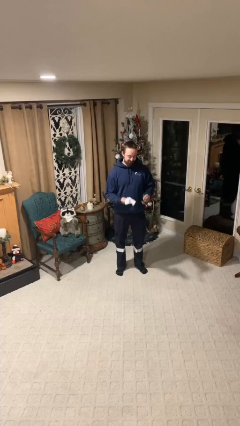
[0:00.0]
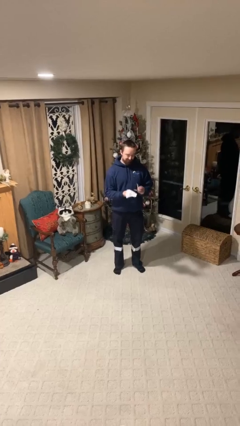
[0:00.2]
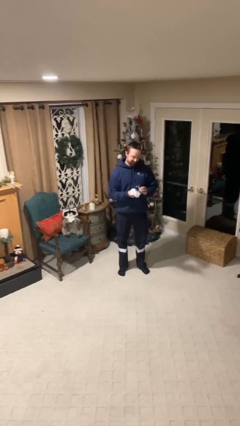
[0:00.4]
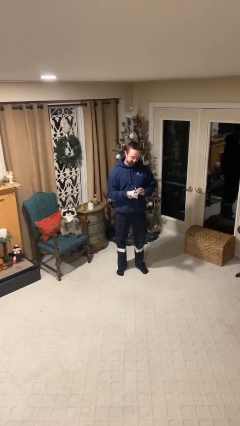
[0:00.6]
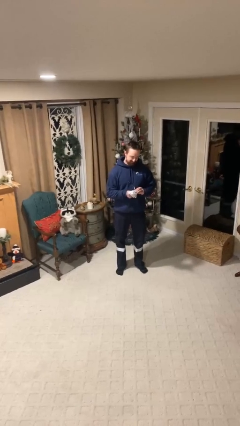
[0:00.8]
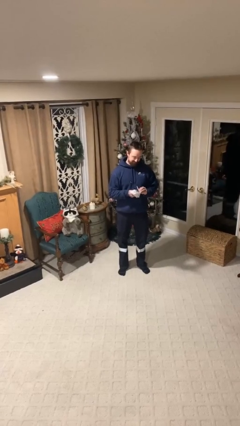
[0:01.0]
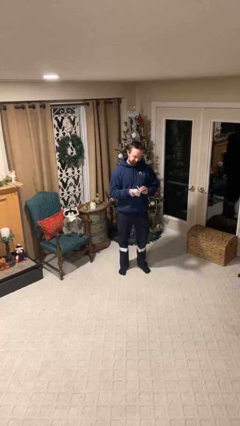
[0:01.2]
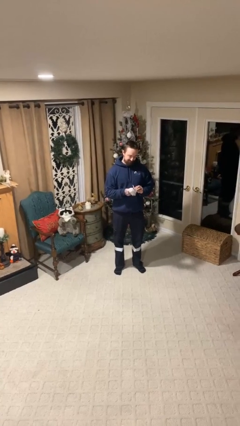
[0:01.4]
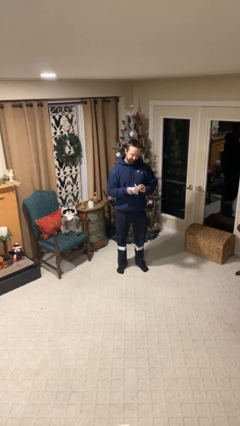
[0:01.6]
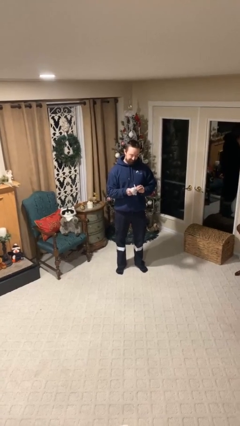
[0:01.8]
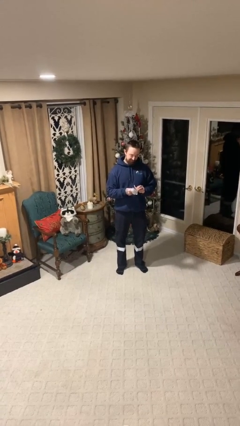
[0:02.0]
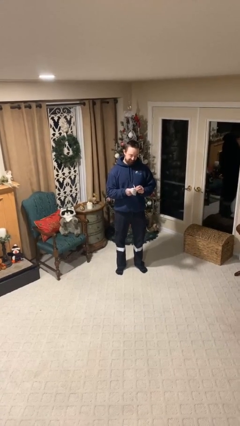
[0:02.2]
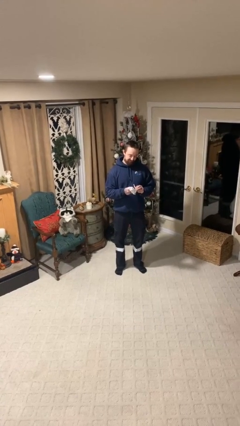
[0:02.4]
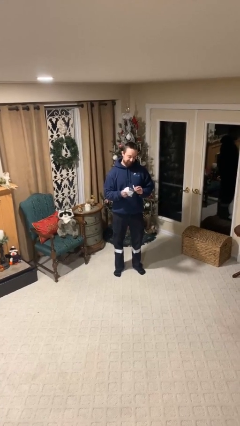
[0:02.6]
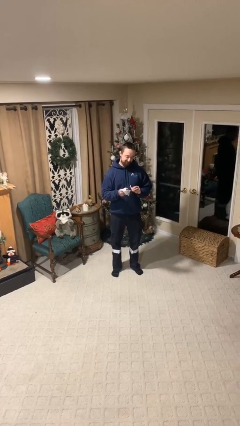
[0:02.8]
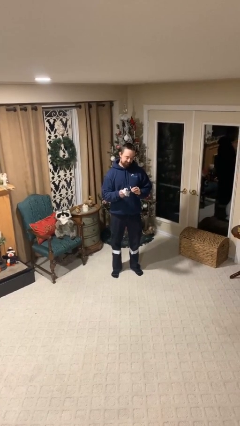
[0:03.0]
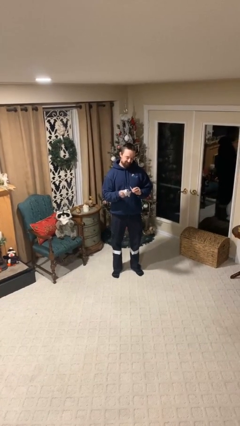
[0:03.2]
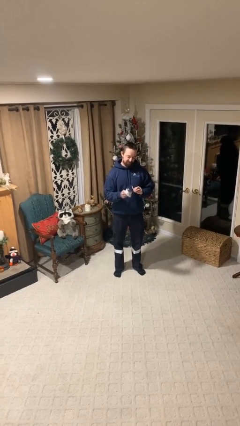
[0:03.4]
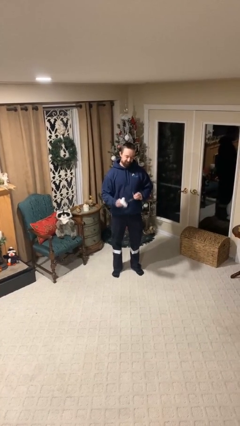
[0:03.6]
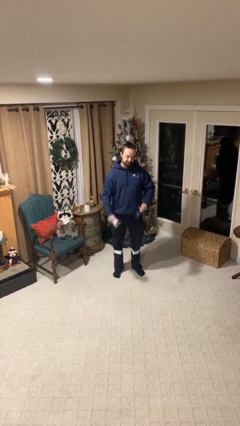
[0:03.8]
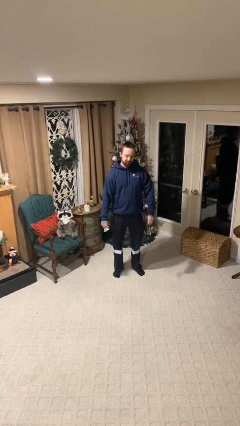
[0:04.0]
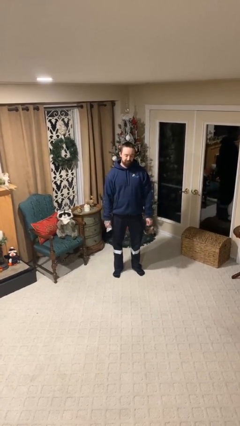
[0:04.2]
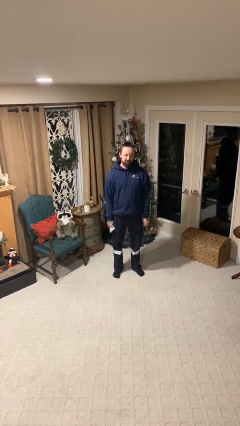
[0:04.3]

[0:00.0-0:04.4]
person cleans eyeglasses

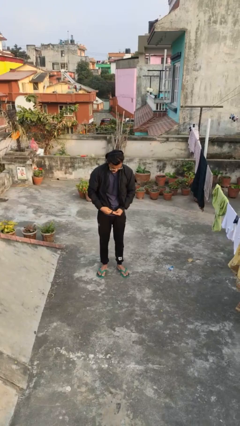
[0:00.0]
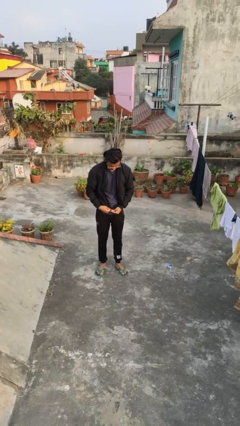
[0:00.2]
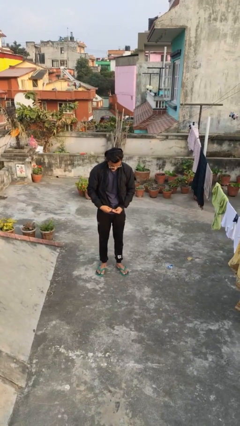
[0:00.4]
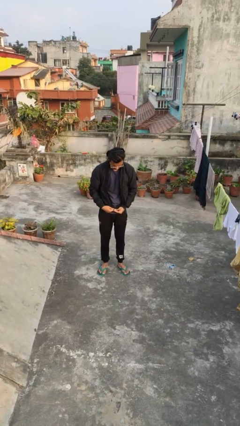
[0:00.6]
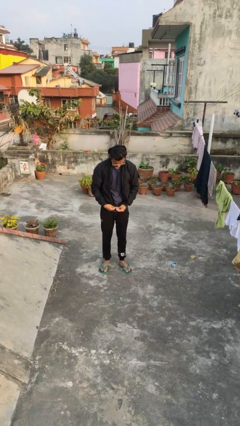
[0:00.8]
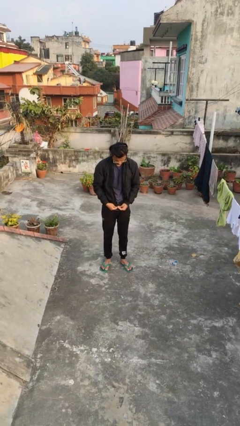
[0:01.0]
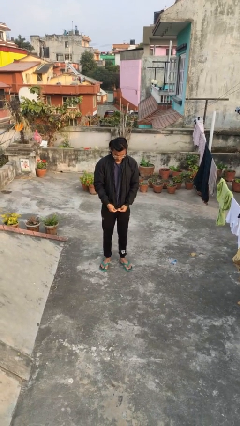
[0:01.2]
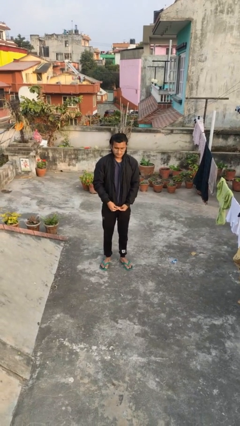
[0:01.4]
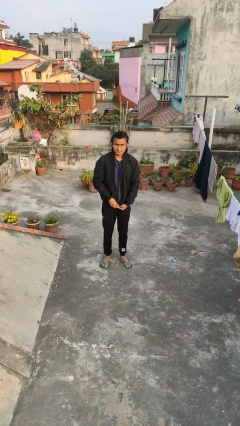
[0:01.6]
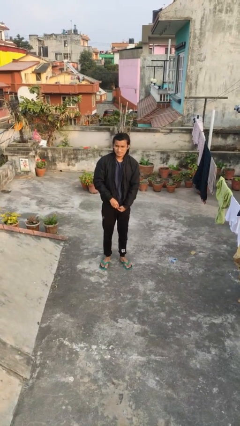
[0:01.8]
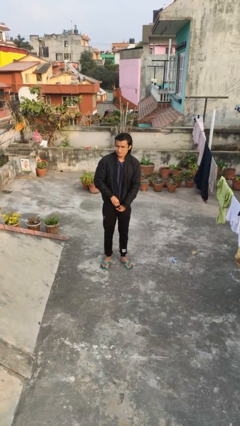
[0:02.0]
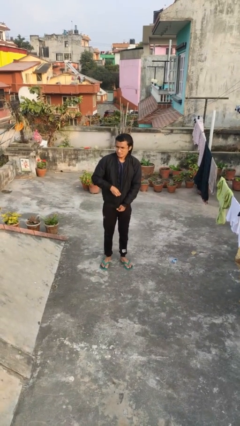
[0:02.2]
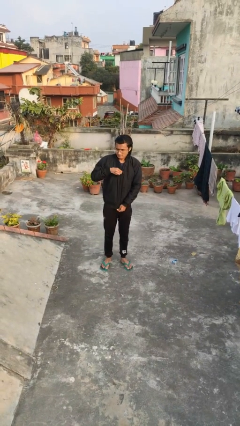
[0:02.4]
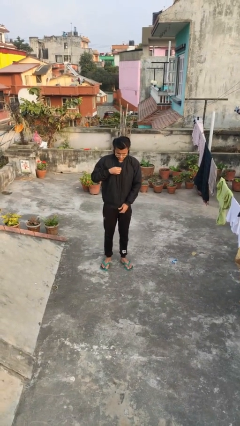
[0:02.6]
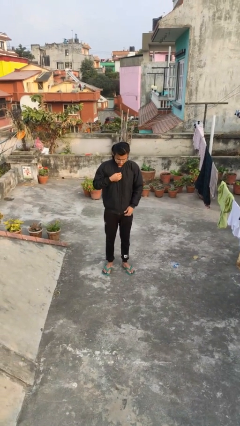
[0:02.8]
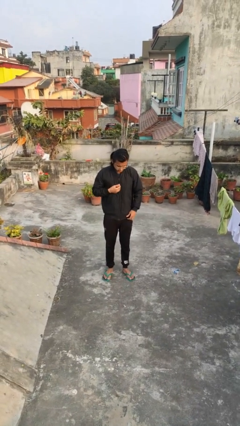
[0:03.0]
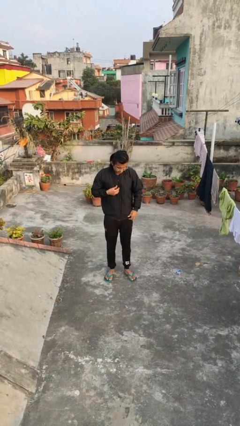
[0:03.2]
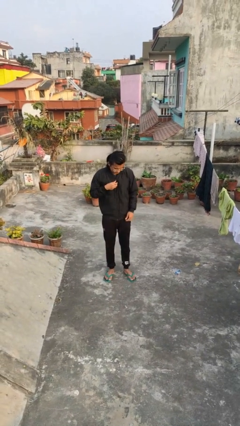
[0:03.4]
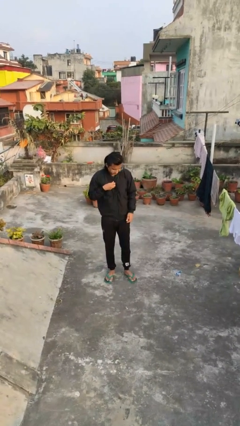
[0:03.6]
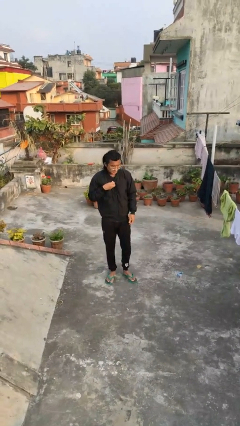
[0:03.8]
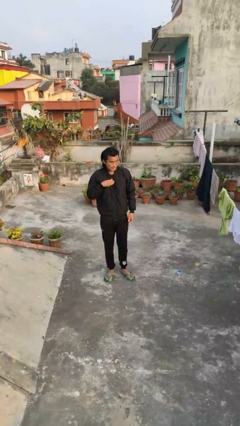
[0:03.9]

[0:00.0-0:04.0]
person zips up jacket

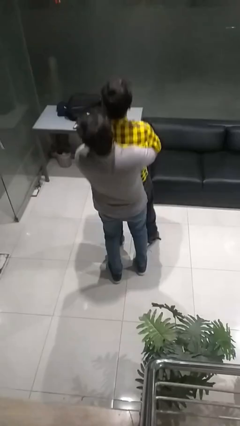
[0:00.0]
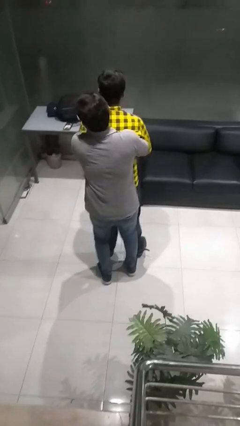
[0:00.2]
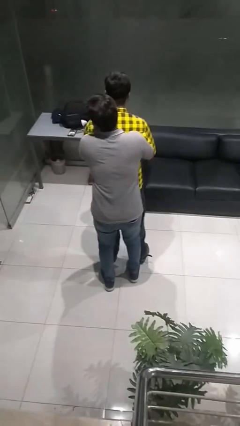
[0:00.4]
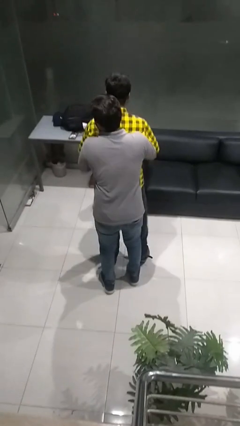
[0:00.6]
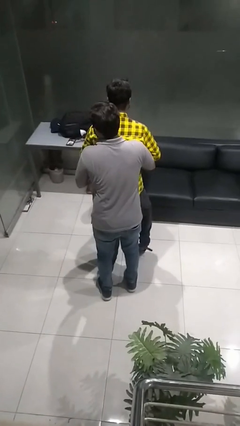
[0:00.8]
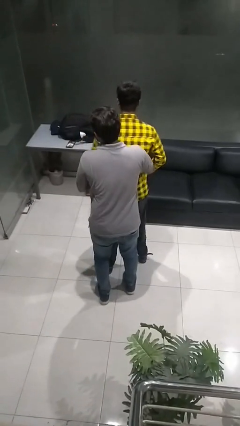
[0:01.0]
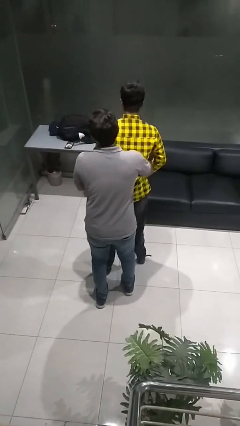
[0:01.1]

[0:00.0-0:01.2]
person puts down person

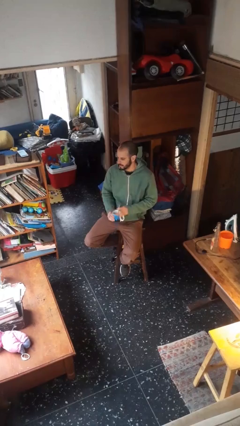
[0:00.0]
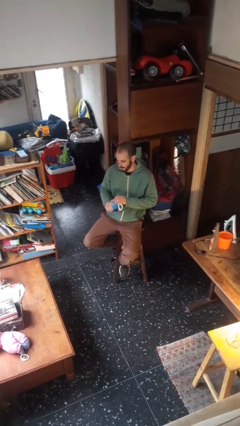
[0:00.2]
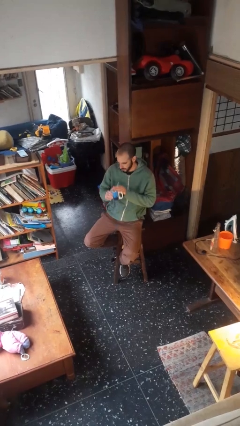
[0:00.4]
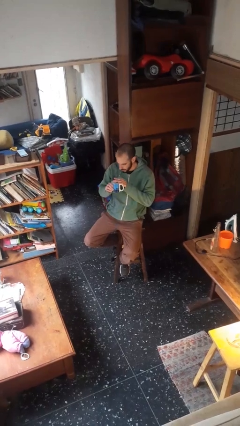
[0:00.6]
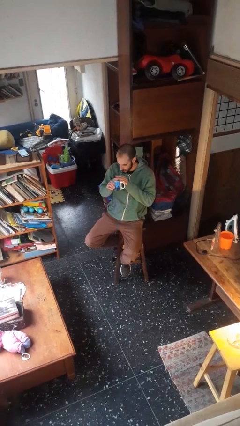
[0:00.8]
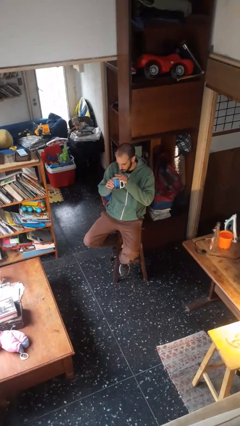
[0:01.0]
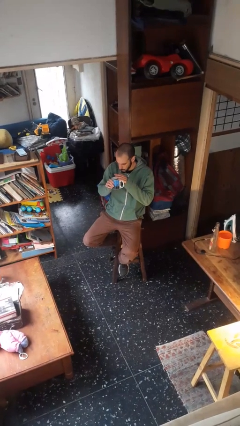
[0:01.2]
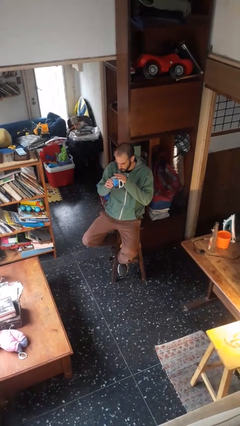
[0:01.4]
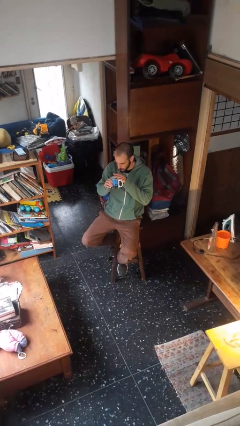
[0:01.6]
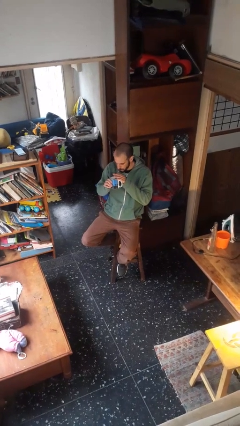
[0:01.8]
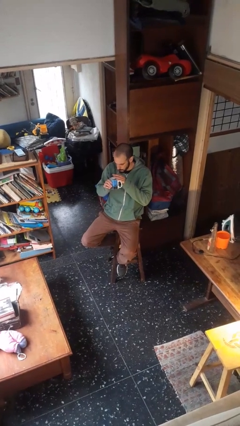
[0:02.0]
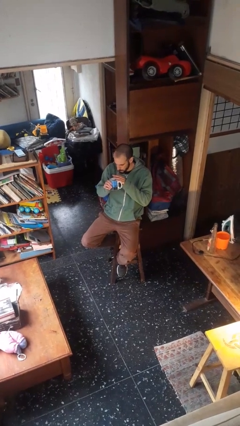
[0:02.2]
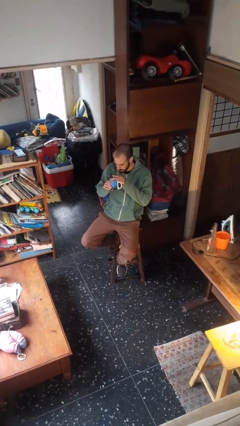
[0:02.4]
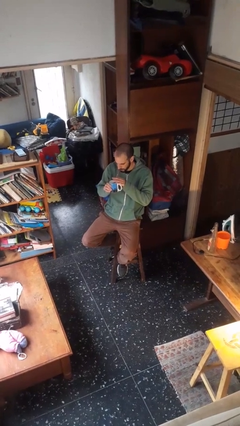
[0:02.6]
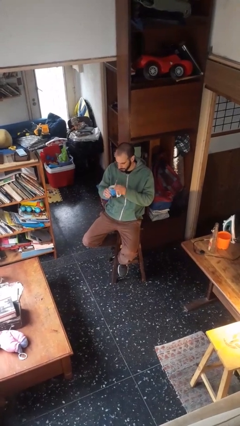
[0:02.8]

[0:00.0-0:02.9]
person drinks from straw

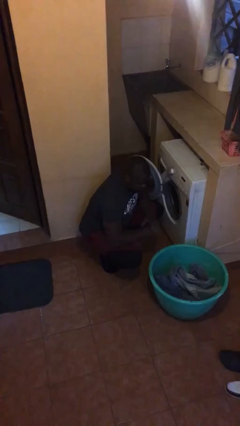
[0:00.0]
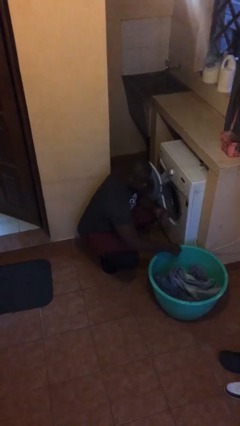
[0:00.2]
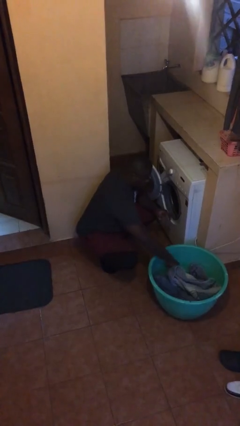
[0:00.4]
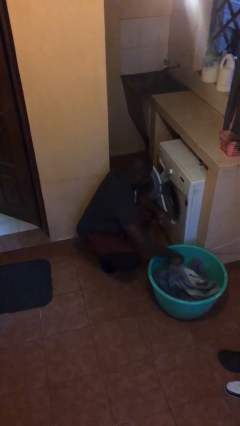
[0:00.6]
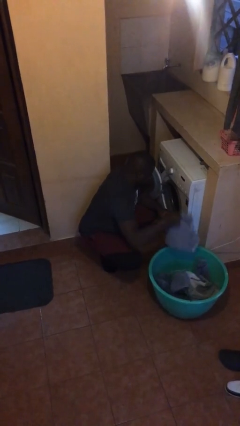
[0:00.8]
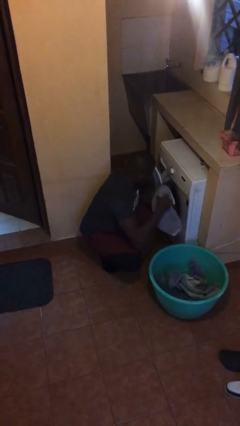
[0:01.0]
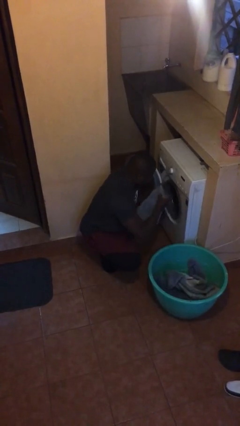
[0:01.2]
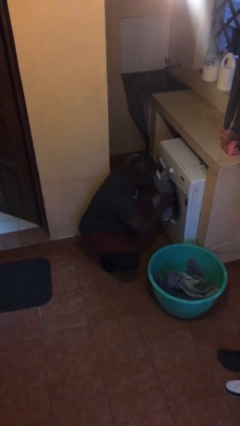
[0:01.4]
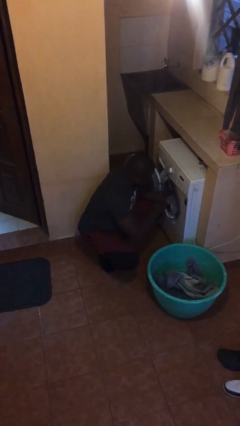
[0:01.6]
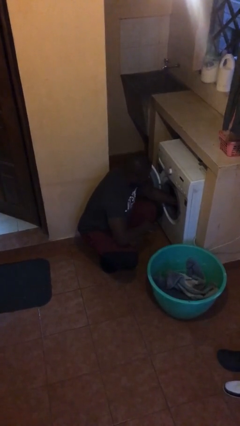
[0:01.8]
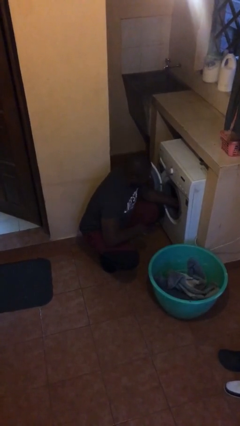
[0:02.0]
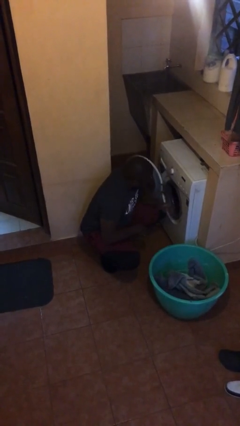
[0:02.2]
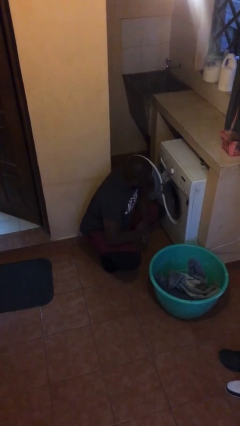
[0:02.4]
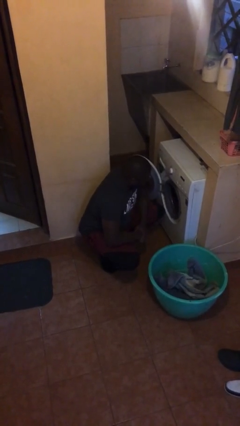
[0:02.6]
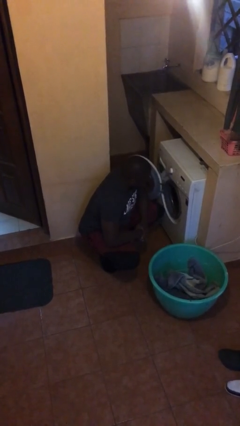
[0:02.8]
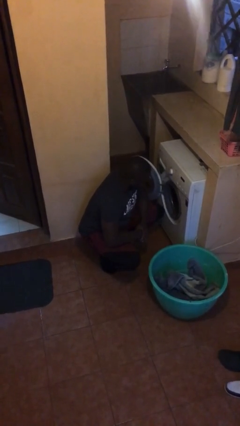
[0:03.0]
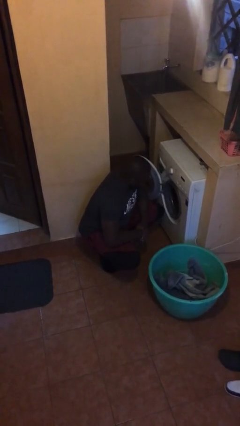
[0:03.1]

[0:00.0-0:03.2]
person loads dryer

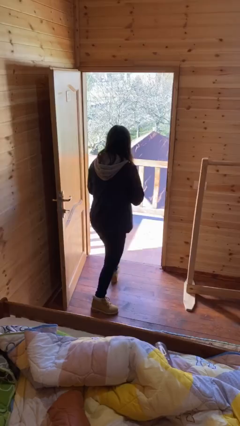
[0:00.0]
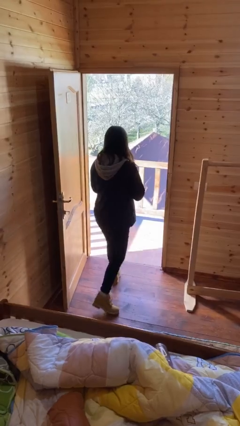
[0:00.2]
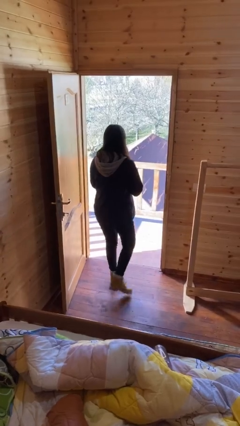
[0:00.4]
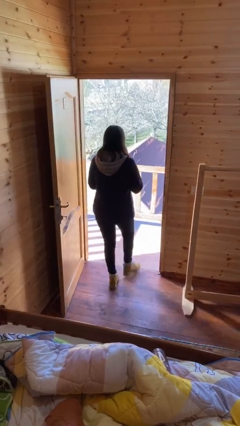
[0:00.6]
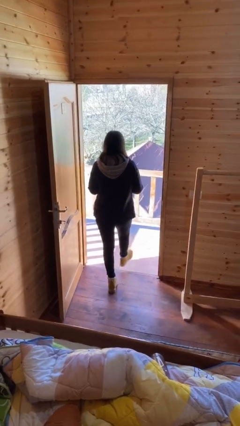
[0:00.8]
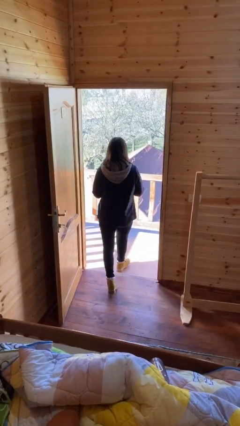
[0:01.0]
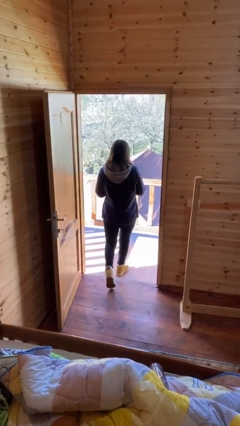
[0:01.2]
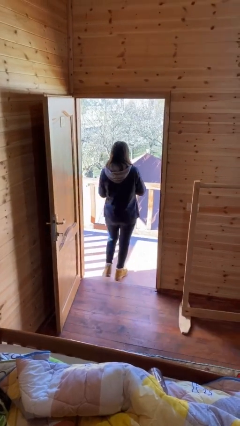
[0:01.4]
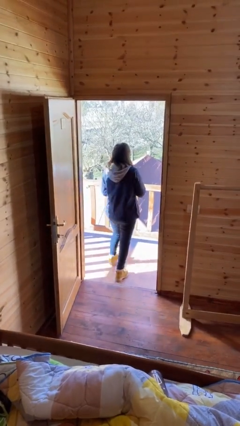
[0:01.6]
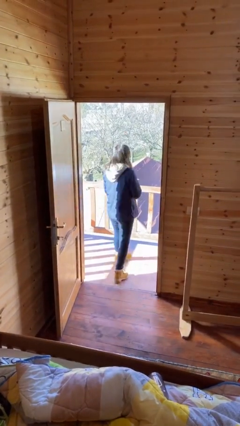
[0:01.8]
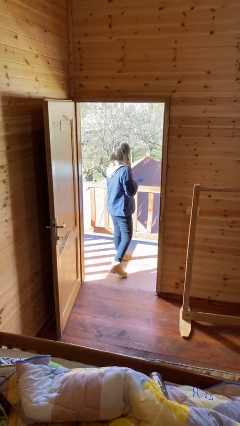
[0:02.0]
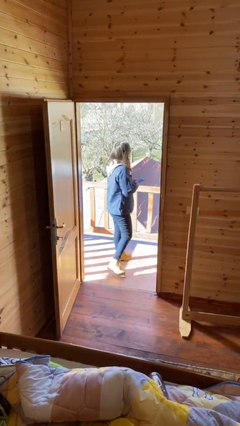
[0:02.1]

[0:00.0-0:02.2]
person exits scene through structure
